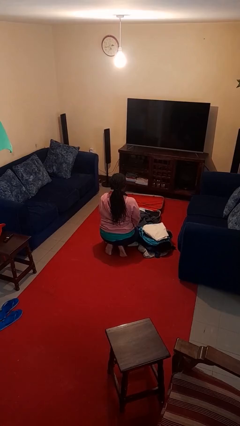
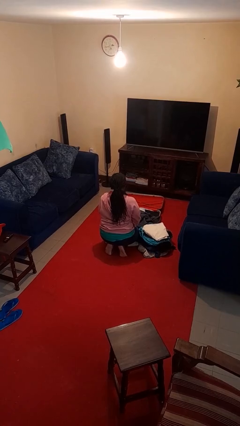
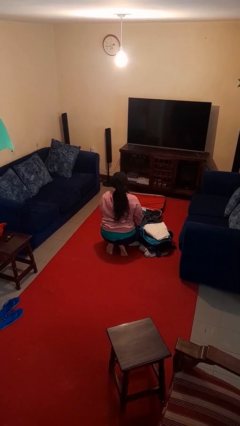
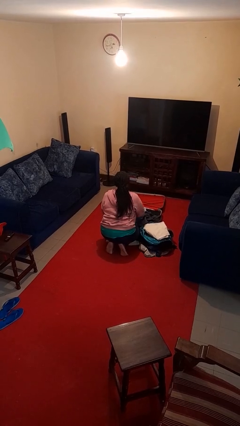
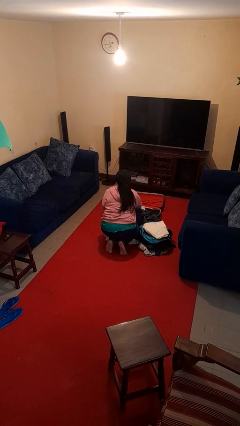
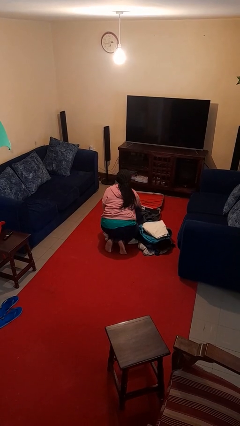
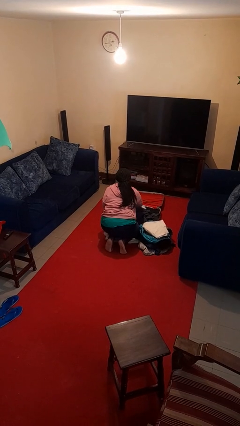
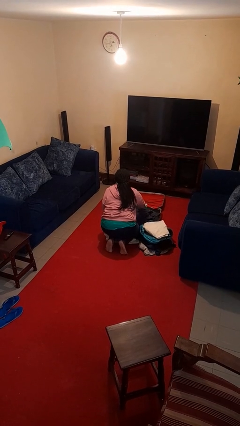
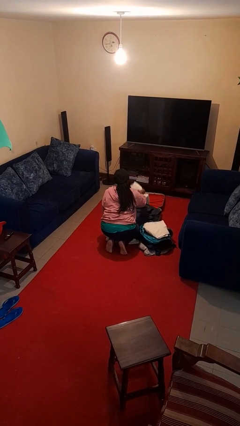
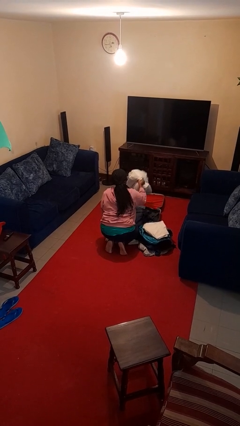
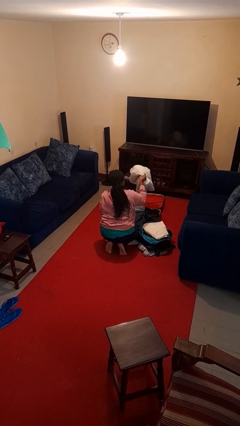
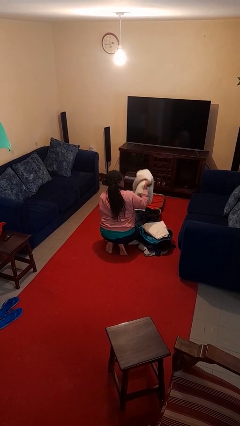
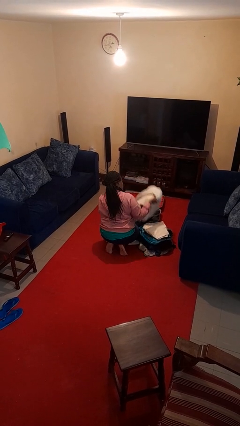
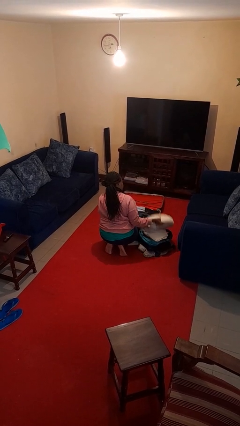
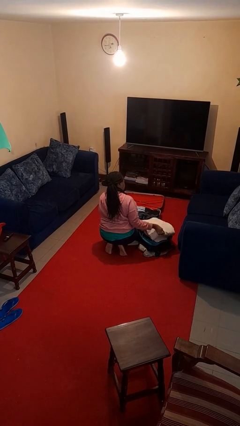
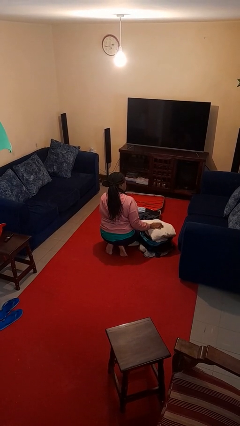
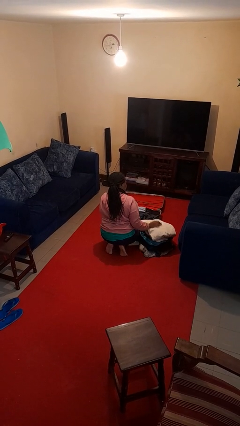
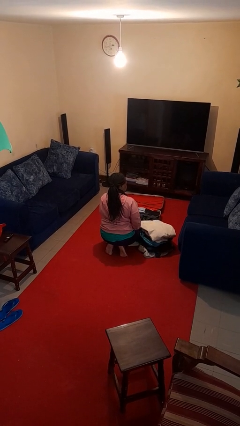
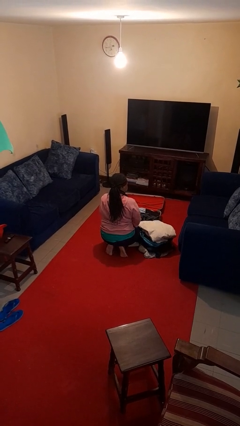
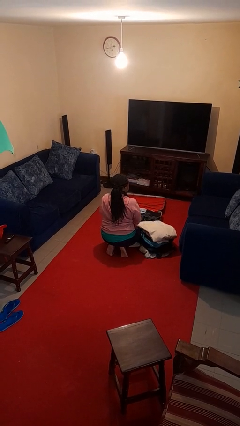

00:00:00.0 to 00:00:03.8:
person unloads clothes from suitcase

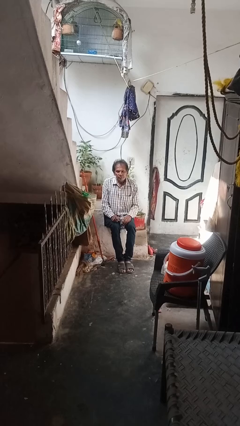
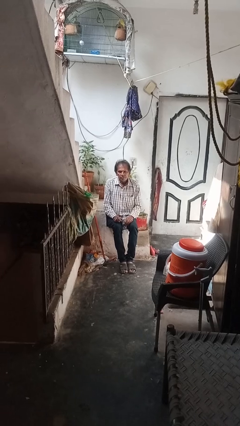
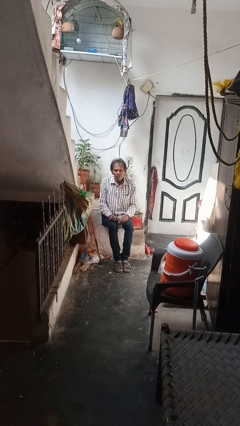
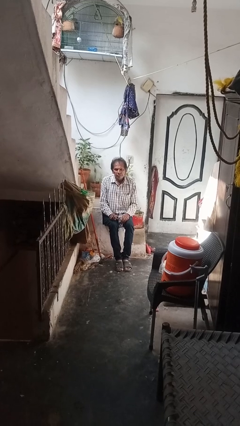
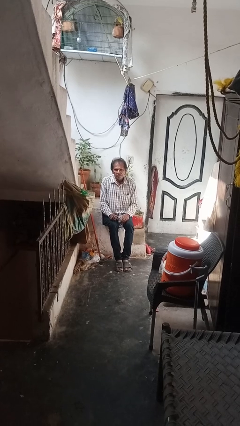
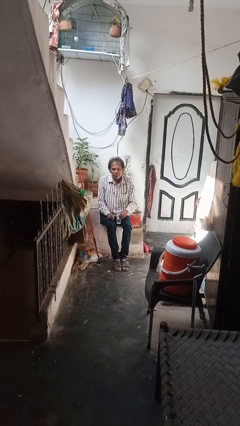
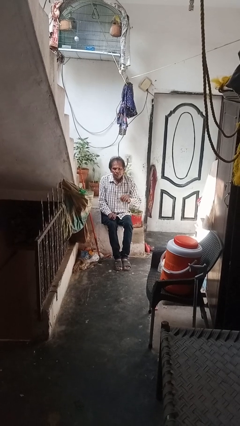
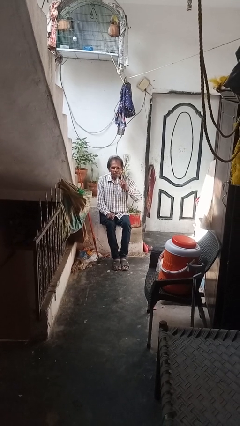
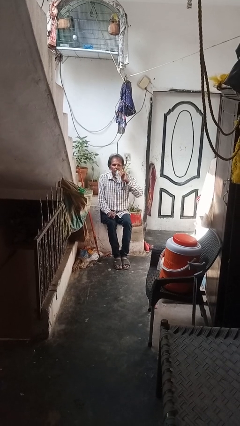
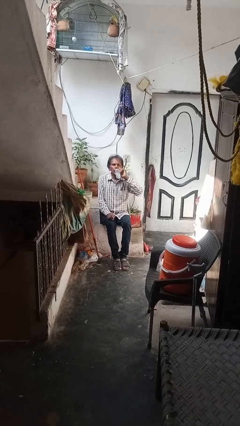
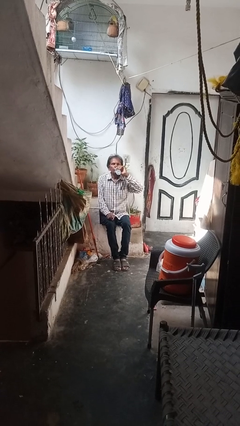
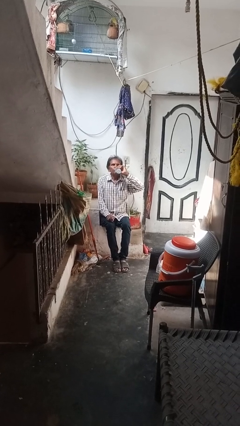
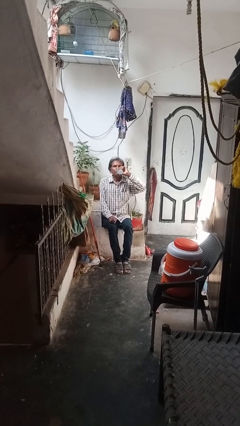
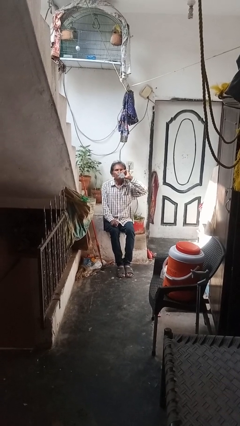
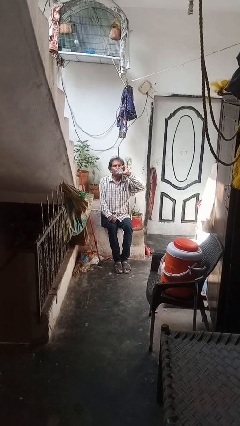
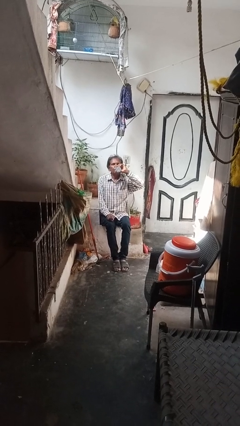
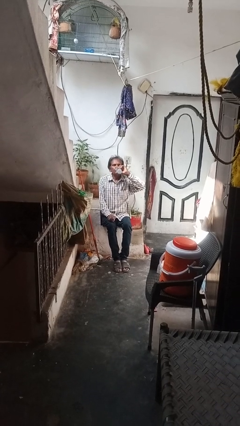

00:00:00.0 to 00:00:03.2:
person drinks from bottle

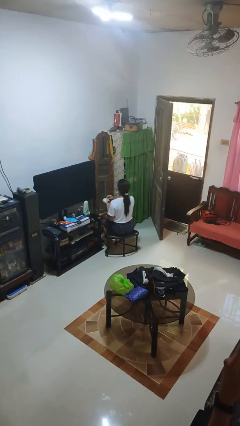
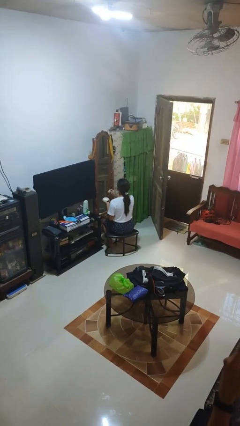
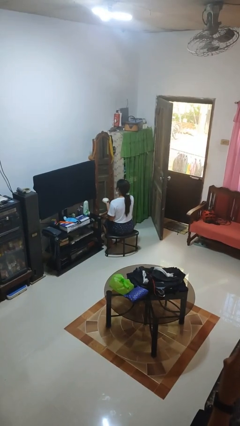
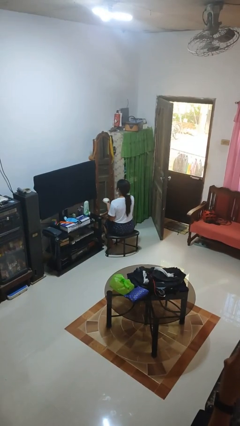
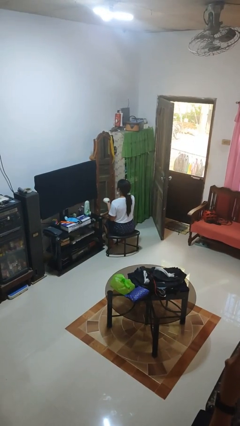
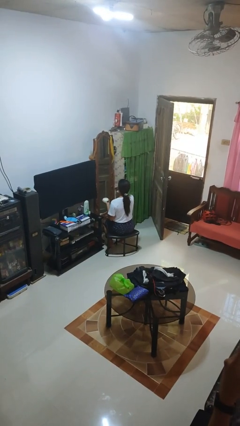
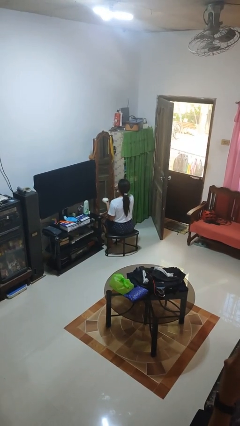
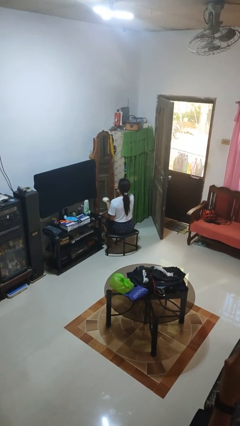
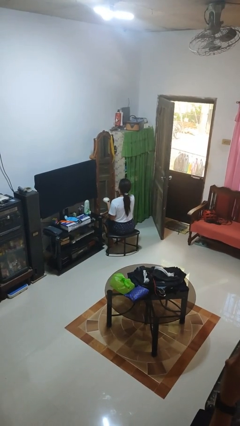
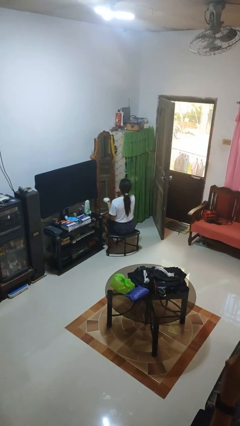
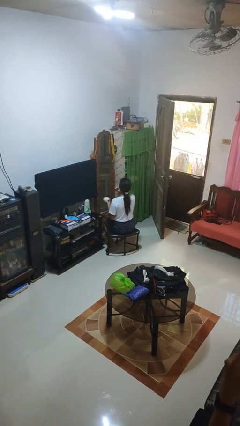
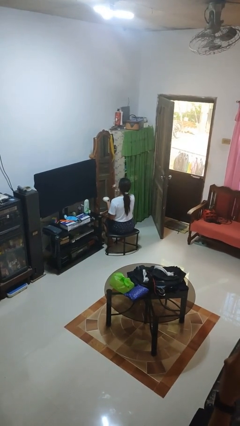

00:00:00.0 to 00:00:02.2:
person applies foundation makeup

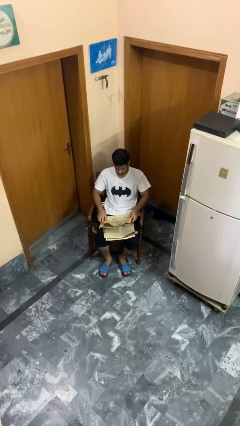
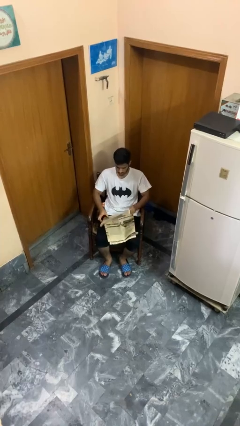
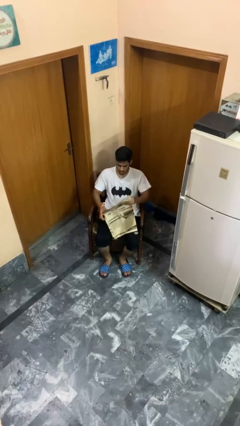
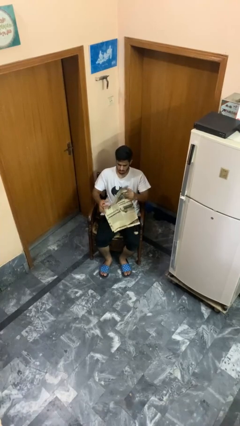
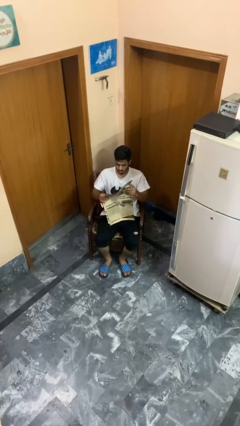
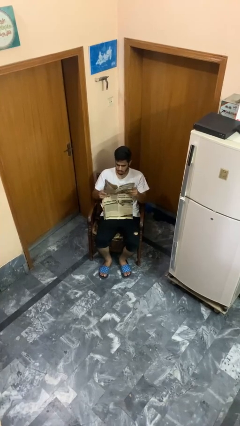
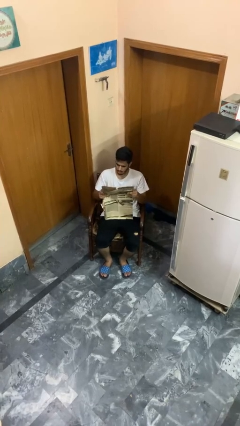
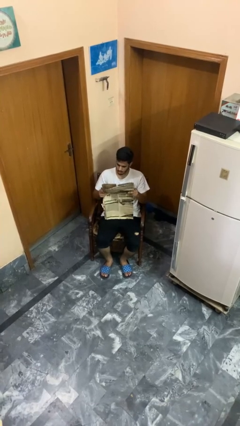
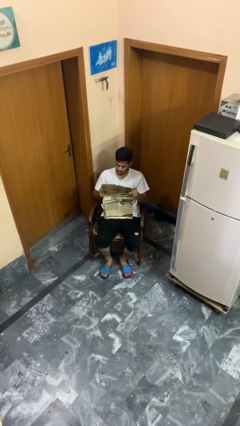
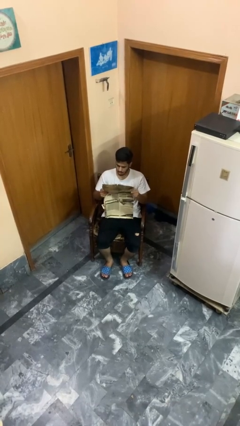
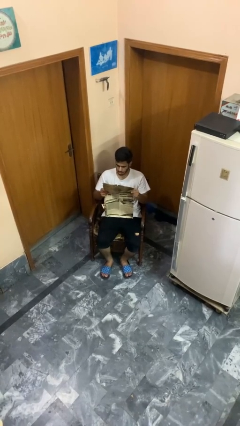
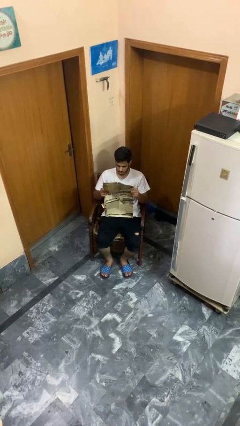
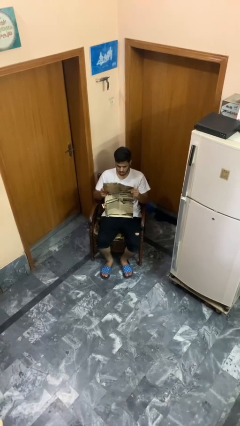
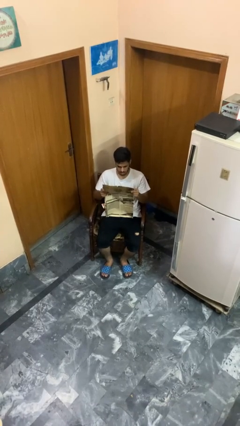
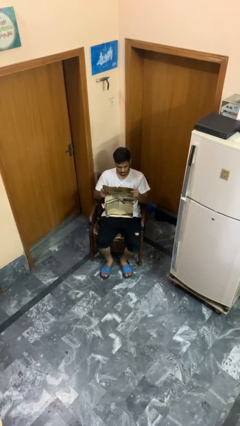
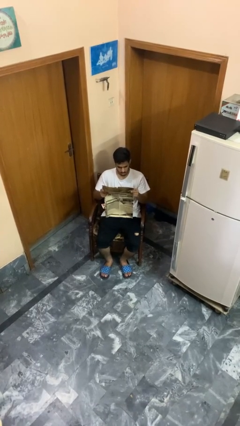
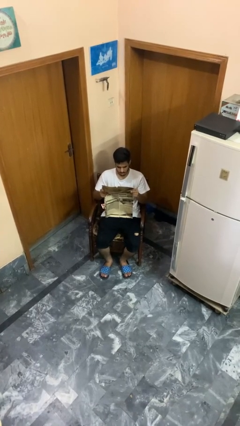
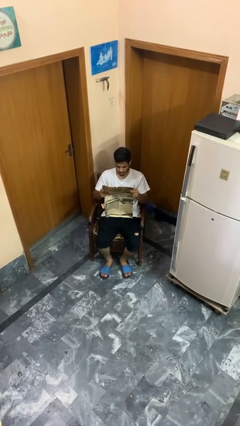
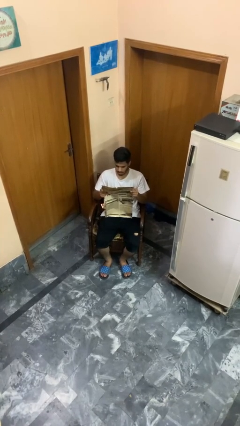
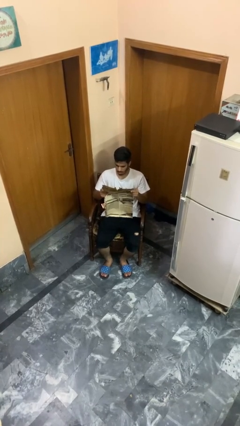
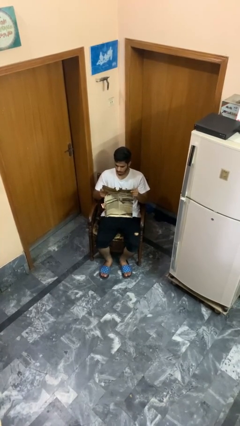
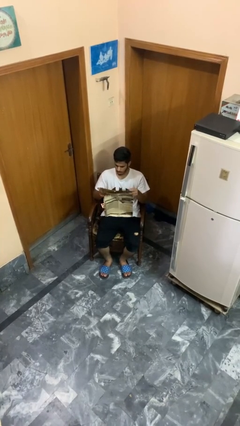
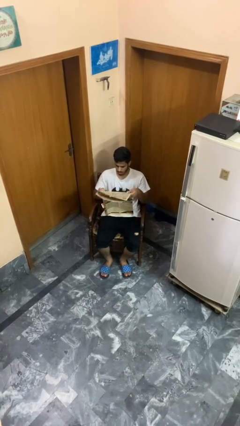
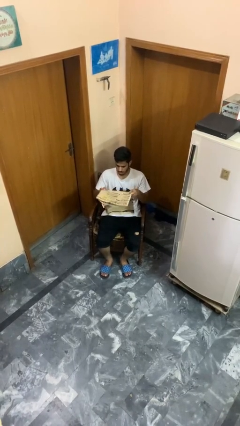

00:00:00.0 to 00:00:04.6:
person reads newspaper

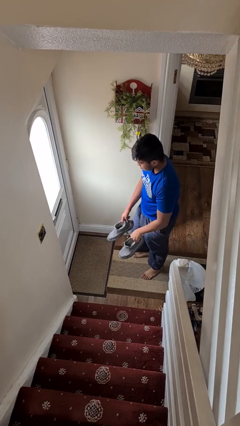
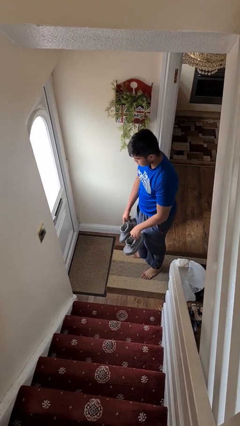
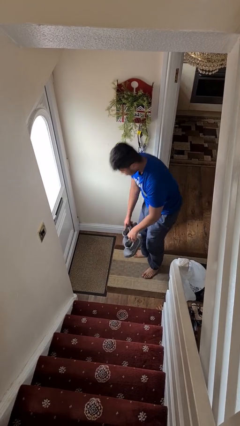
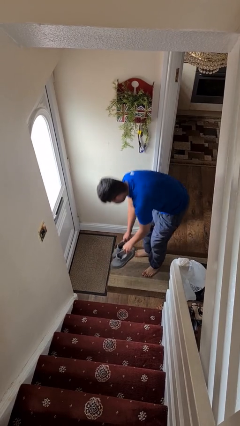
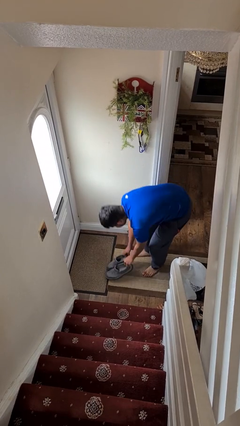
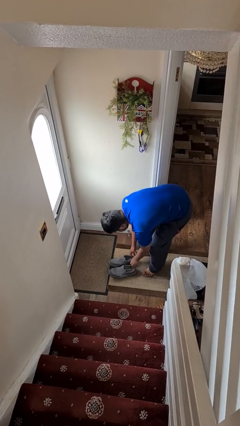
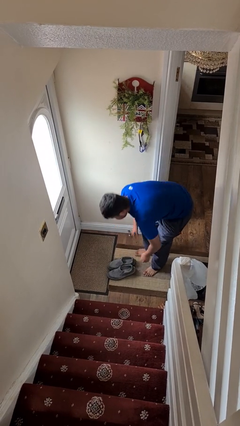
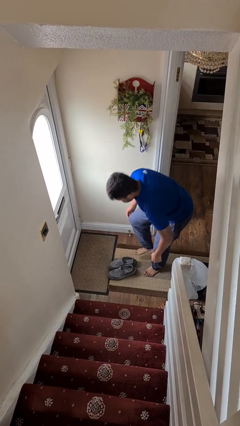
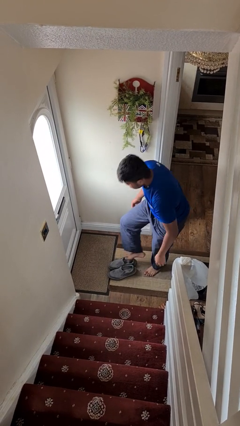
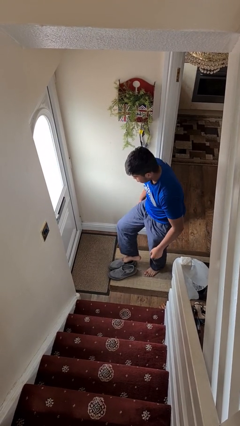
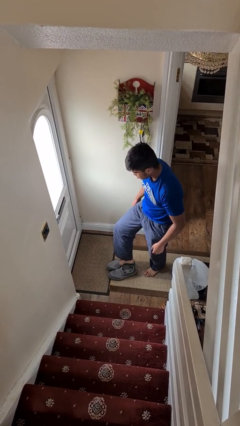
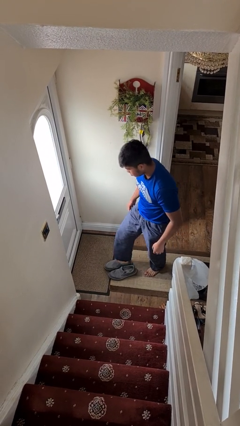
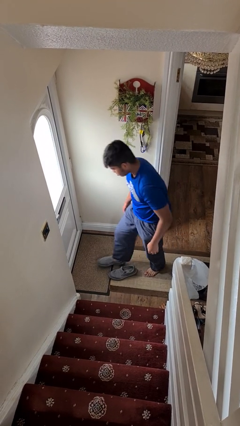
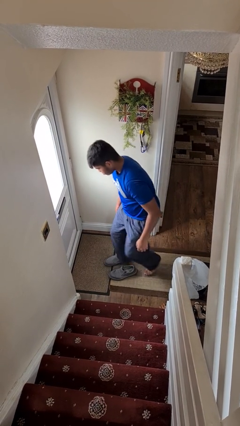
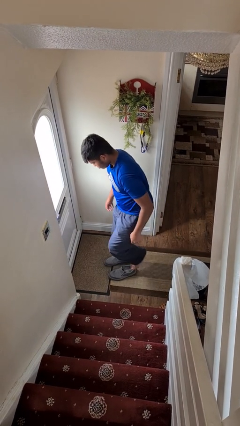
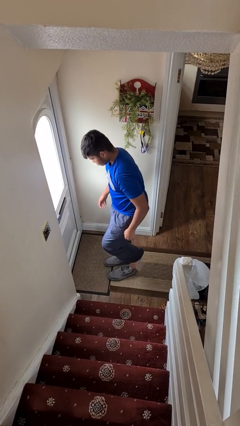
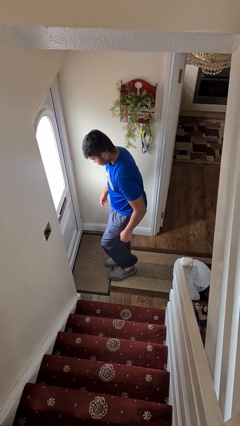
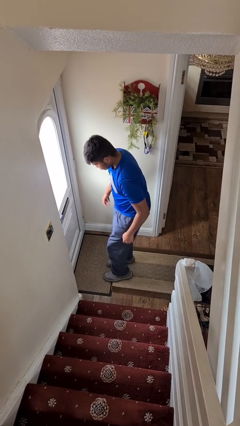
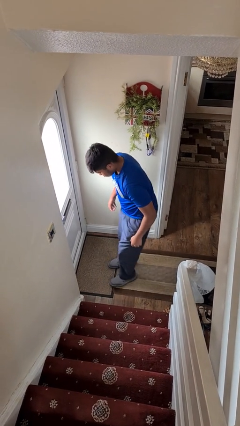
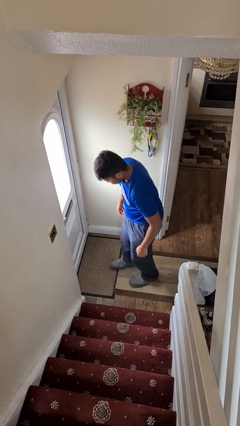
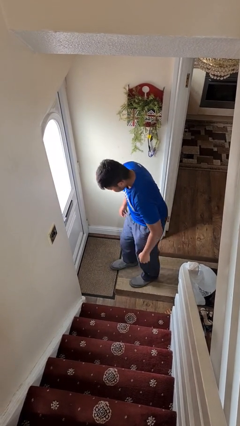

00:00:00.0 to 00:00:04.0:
person puts on shoes
